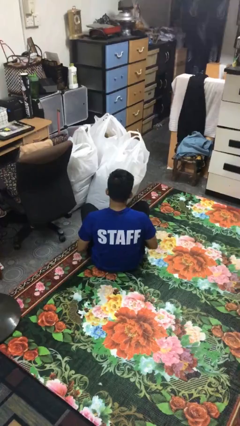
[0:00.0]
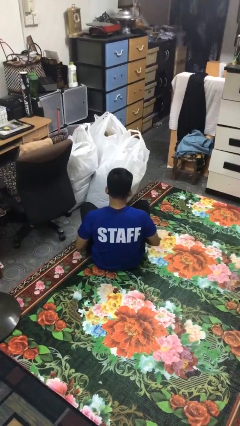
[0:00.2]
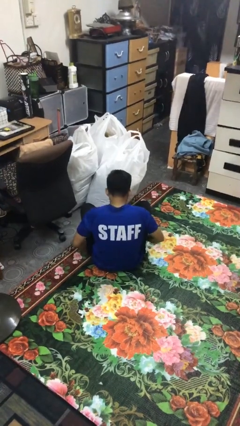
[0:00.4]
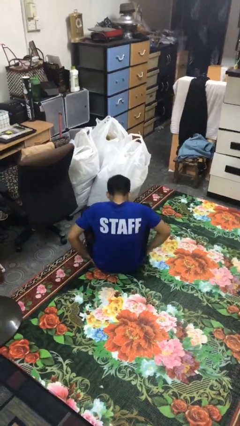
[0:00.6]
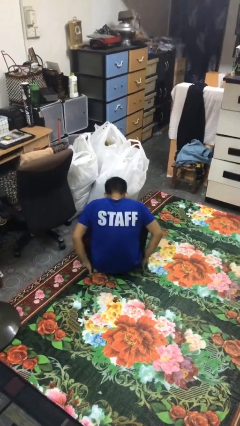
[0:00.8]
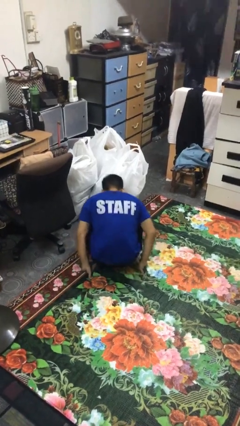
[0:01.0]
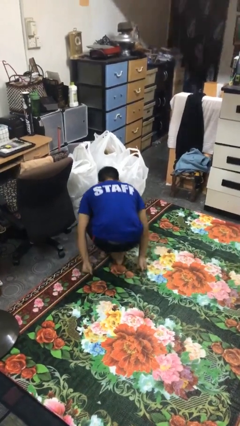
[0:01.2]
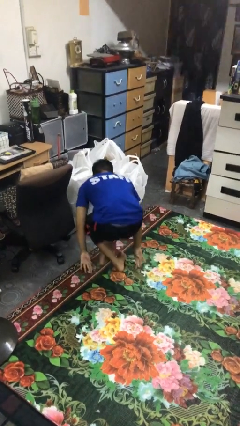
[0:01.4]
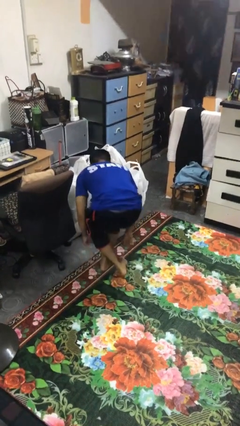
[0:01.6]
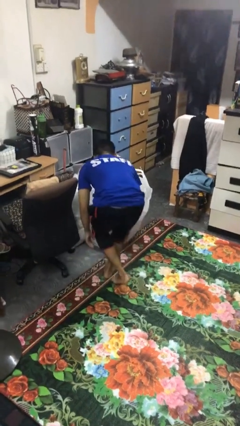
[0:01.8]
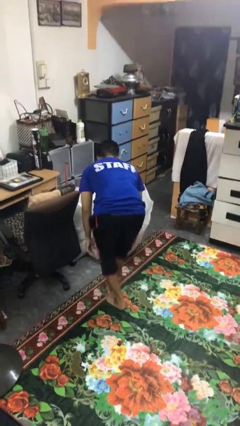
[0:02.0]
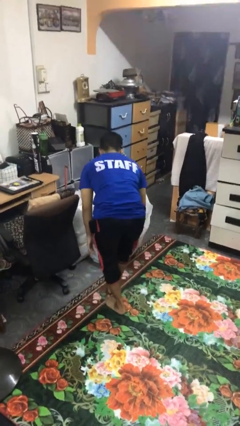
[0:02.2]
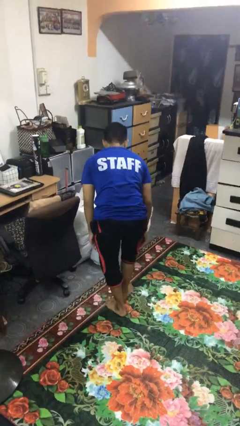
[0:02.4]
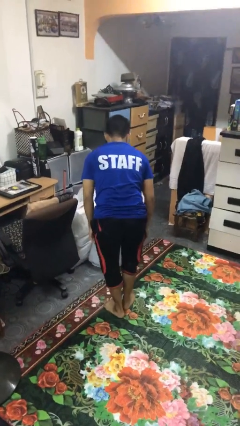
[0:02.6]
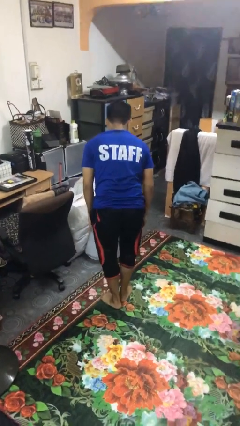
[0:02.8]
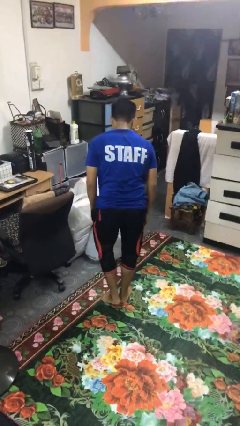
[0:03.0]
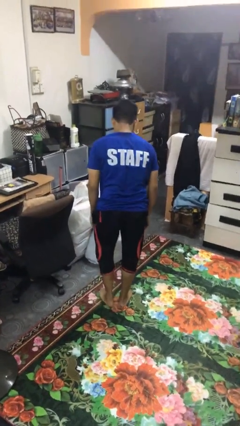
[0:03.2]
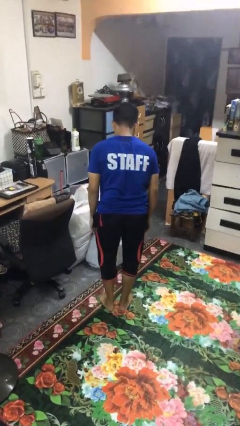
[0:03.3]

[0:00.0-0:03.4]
person stands up from floor

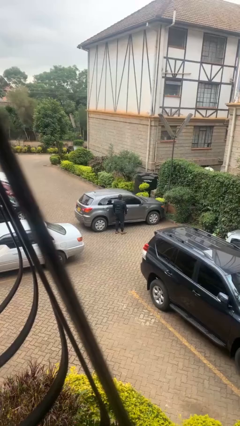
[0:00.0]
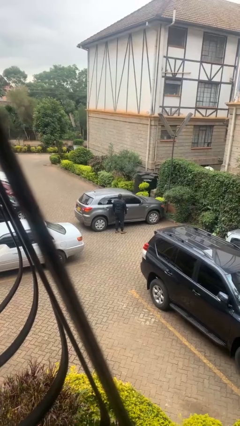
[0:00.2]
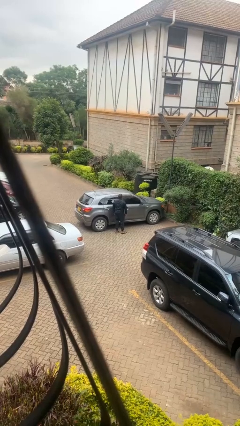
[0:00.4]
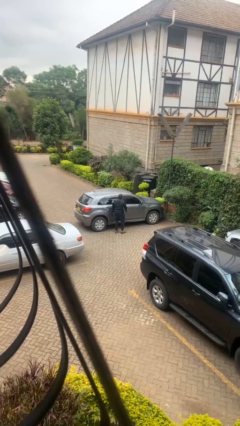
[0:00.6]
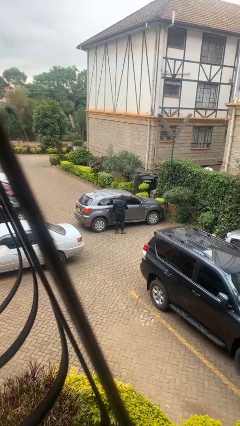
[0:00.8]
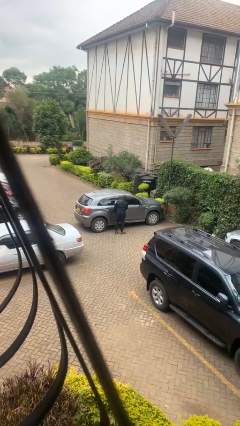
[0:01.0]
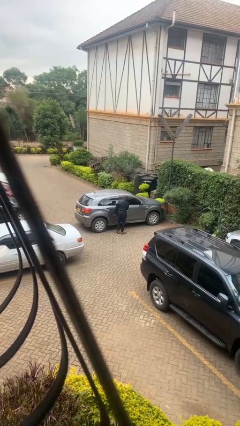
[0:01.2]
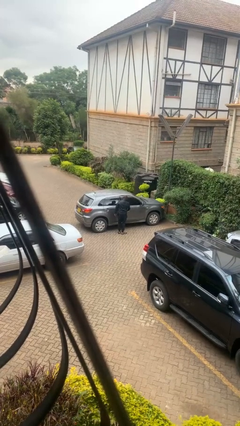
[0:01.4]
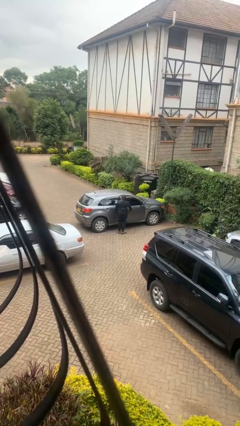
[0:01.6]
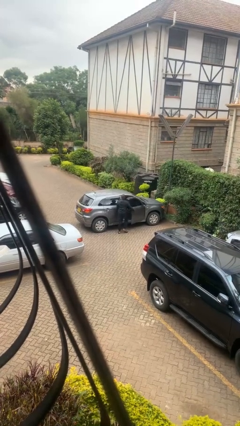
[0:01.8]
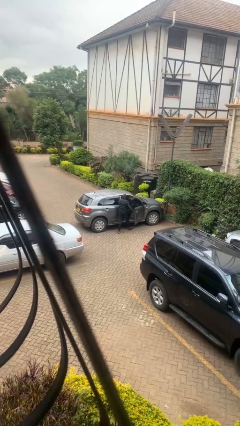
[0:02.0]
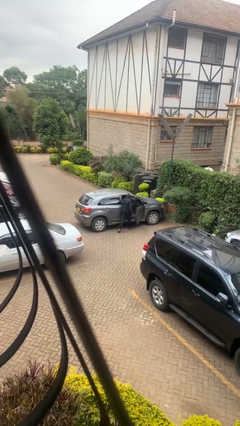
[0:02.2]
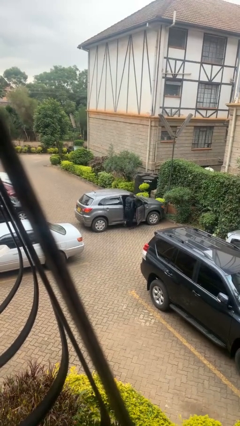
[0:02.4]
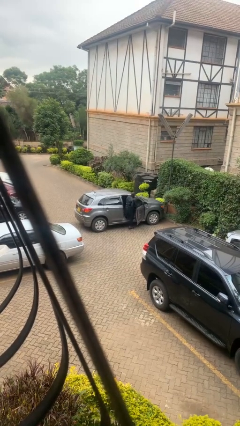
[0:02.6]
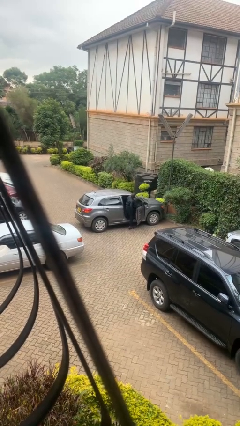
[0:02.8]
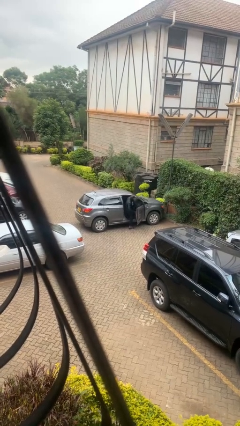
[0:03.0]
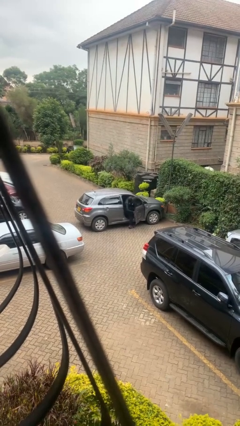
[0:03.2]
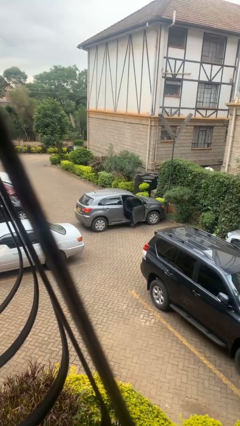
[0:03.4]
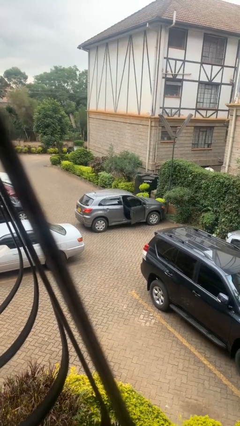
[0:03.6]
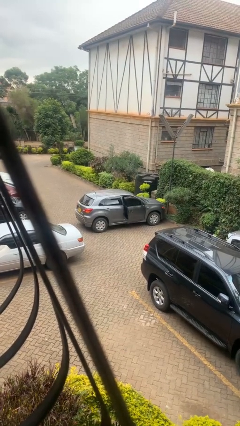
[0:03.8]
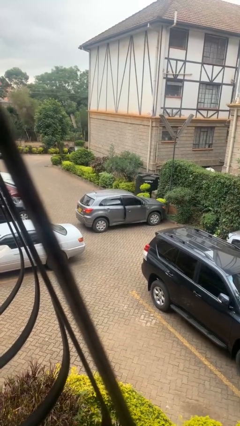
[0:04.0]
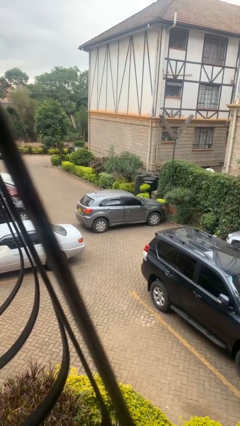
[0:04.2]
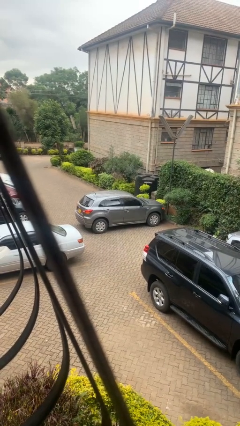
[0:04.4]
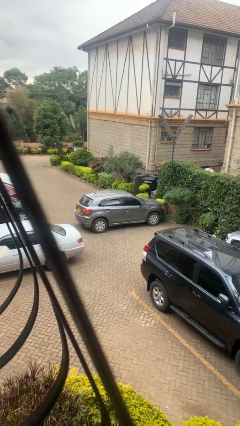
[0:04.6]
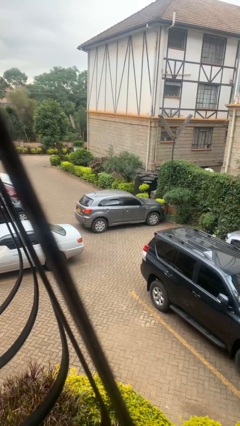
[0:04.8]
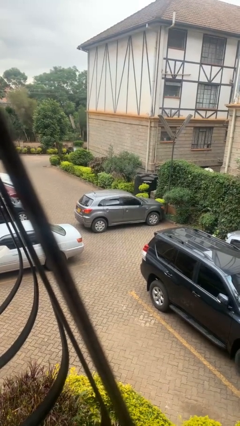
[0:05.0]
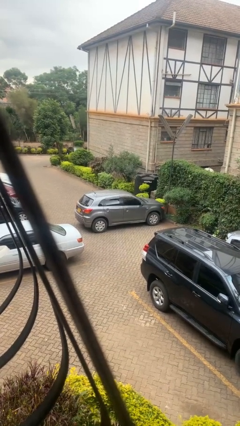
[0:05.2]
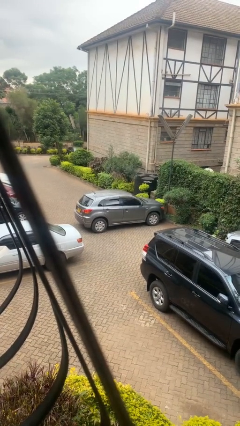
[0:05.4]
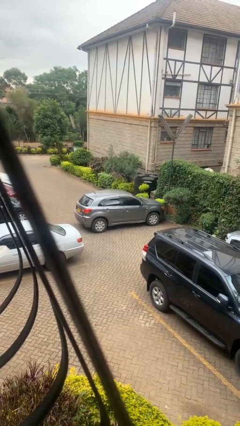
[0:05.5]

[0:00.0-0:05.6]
car picks up person

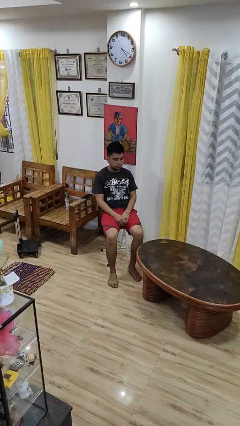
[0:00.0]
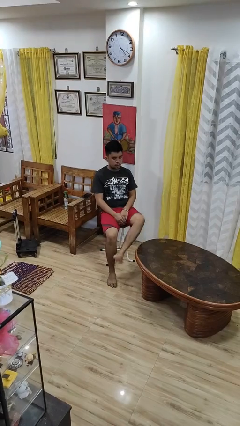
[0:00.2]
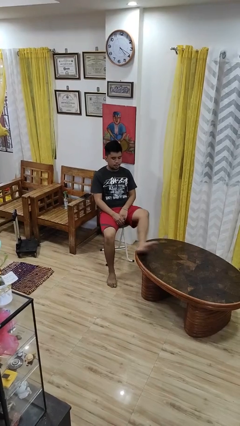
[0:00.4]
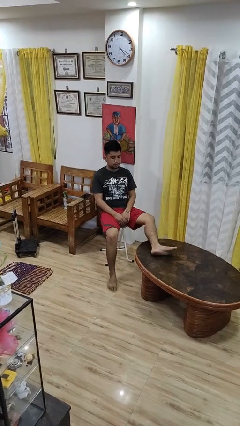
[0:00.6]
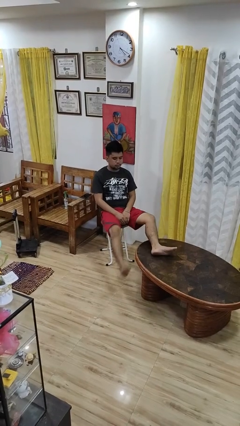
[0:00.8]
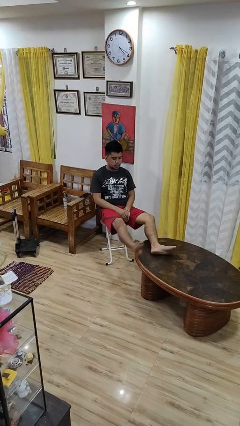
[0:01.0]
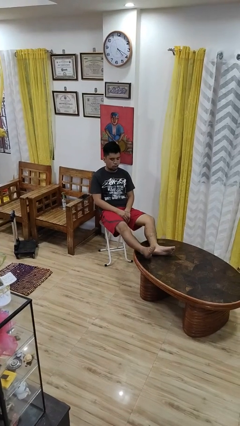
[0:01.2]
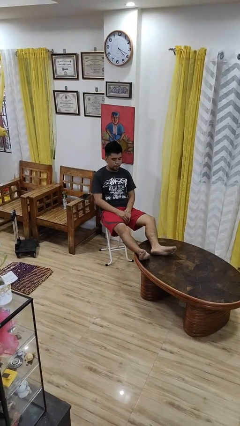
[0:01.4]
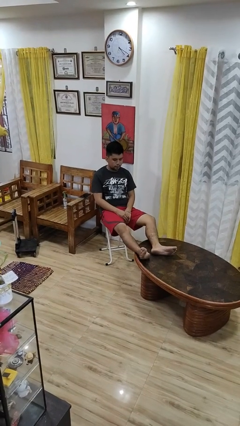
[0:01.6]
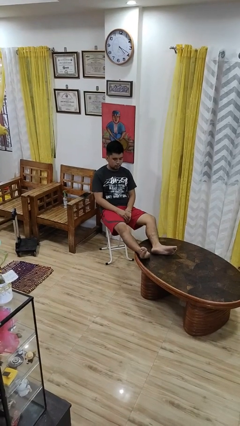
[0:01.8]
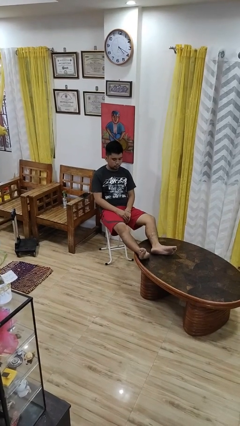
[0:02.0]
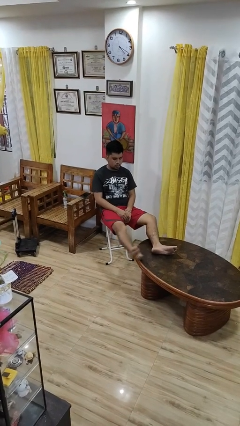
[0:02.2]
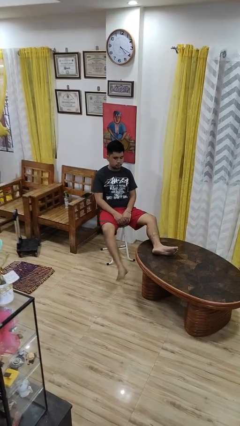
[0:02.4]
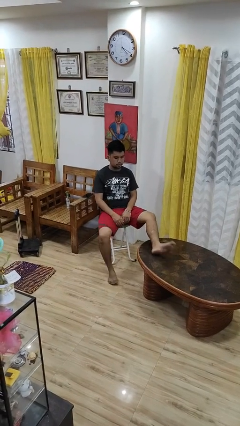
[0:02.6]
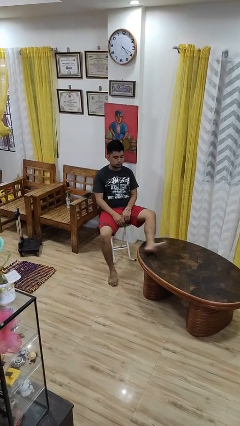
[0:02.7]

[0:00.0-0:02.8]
person puts feet up

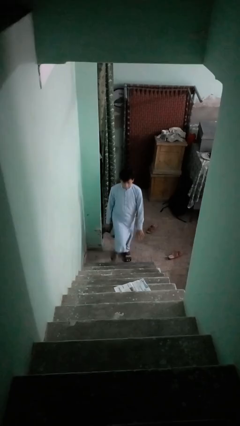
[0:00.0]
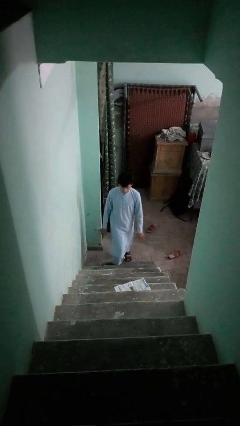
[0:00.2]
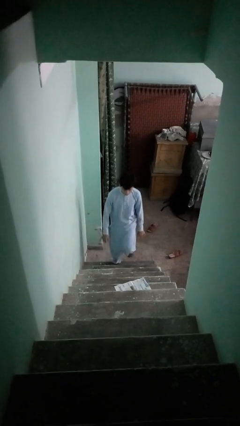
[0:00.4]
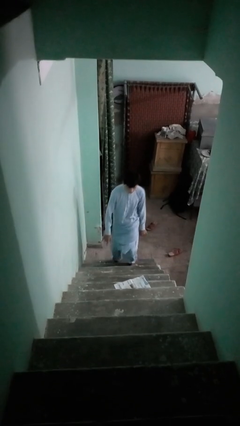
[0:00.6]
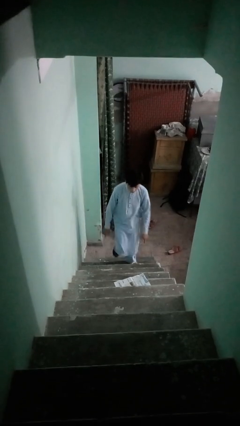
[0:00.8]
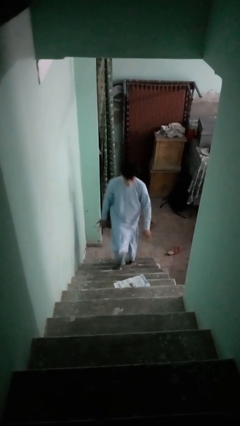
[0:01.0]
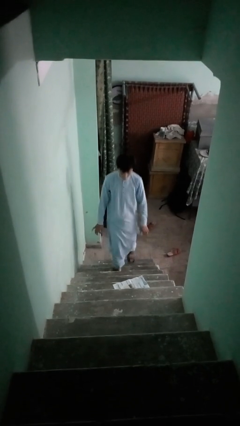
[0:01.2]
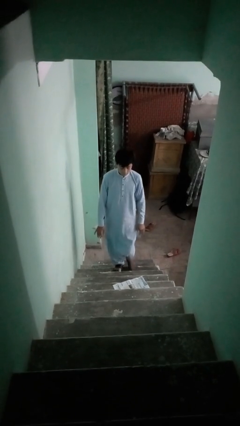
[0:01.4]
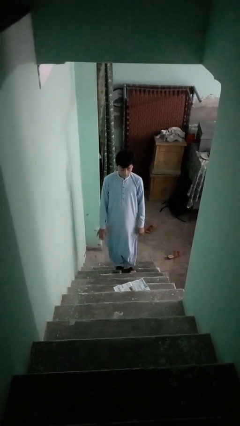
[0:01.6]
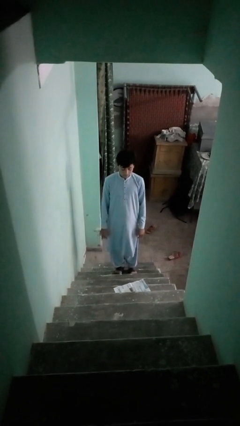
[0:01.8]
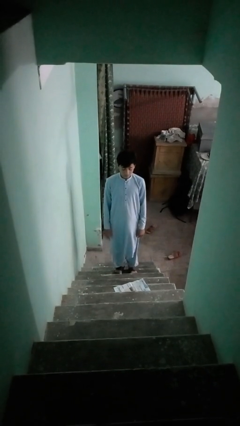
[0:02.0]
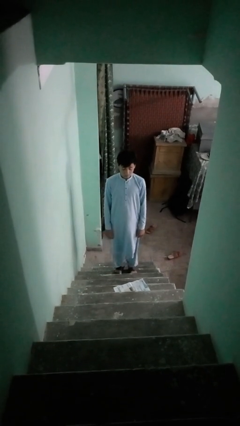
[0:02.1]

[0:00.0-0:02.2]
person climbs up stairs

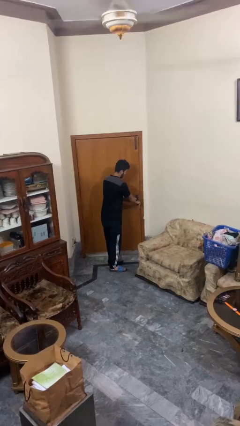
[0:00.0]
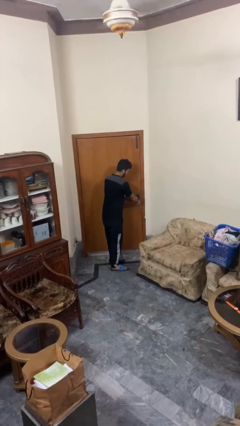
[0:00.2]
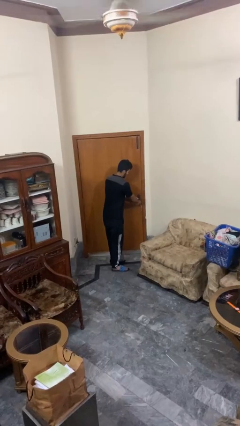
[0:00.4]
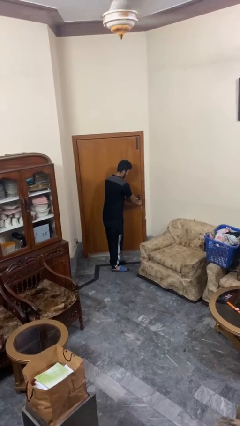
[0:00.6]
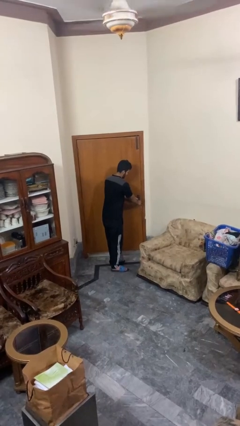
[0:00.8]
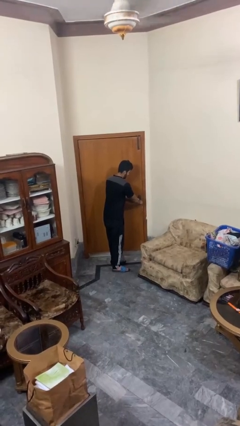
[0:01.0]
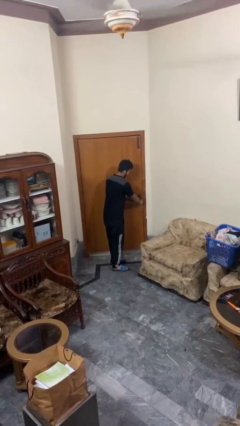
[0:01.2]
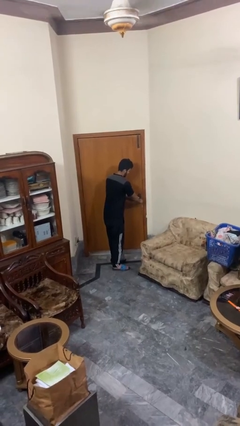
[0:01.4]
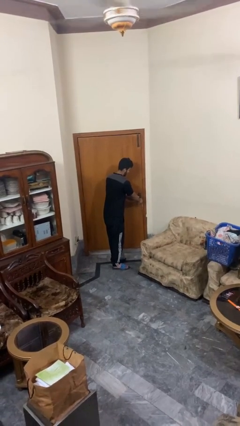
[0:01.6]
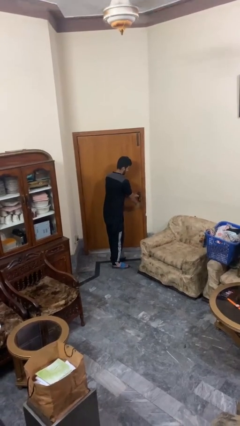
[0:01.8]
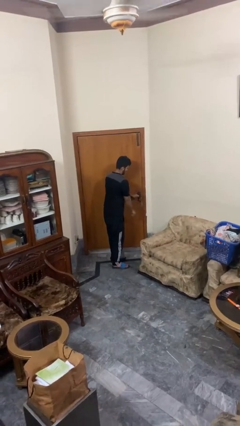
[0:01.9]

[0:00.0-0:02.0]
person locks door with keys

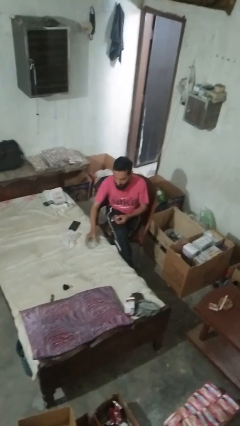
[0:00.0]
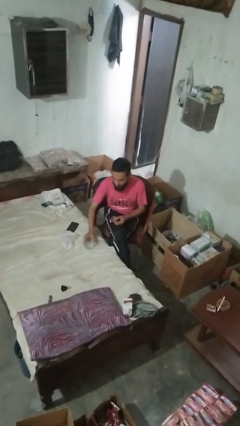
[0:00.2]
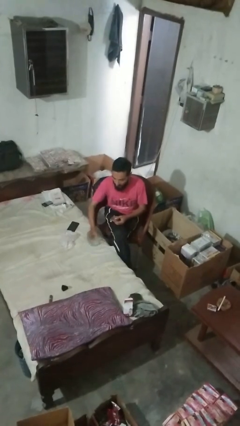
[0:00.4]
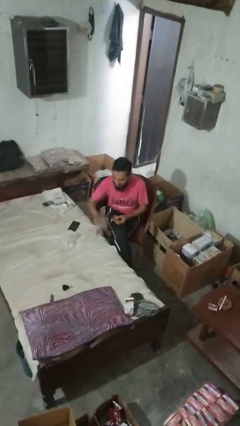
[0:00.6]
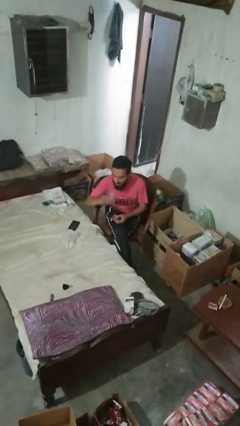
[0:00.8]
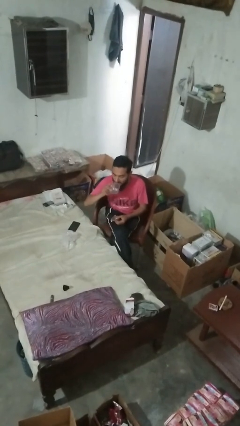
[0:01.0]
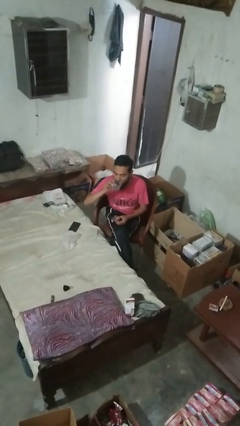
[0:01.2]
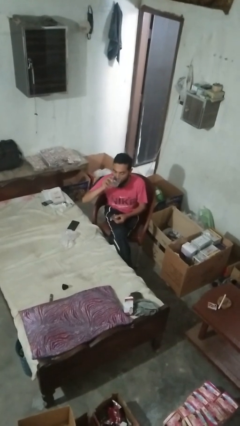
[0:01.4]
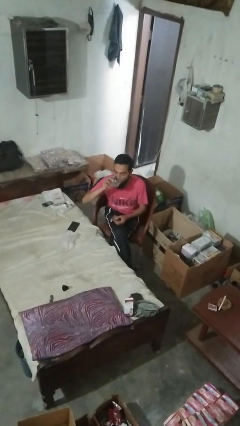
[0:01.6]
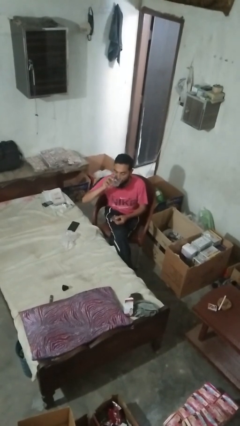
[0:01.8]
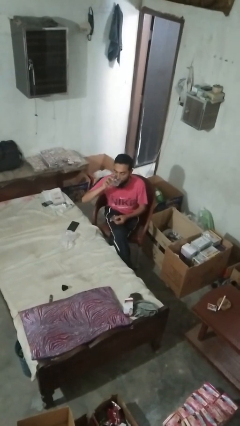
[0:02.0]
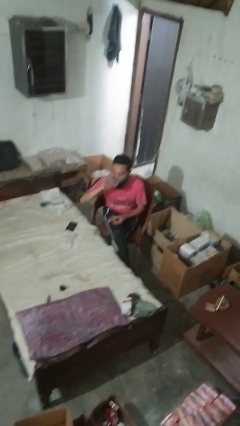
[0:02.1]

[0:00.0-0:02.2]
person drinks from cup
